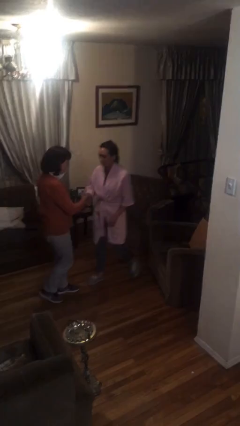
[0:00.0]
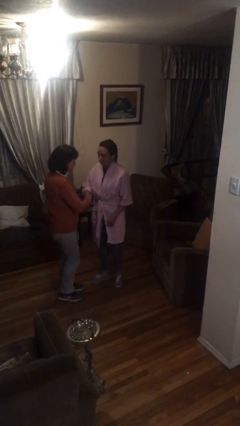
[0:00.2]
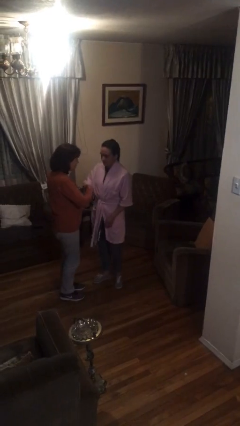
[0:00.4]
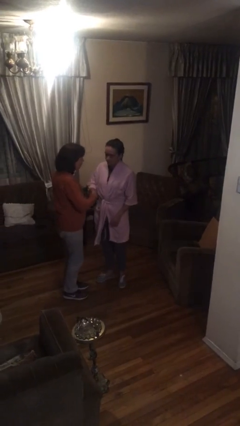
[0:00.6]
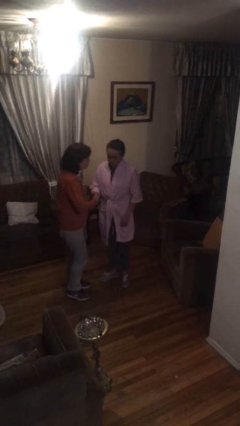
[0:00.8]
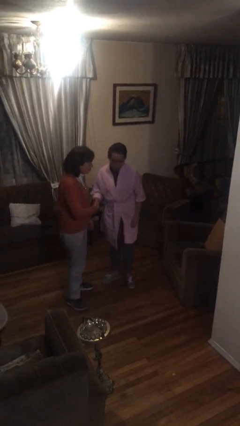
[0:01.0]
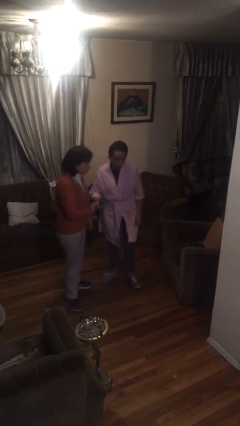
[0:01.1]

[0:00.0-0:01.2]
person shakes hand

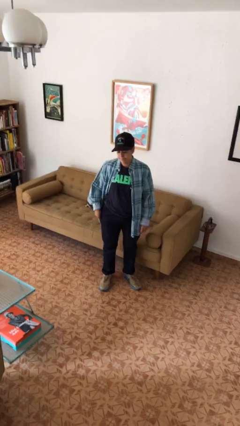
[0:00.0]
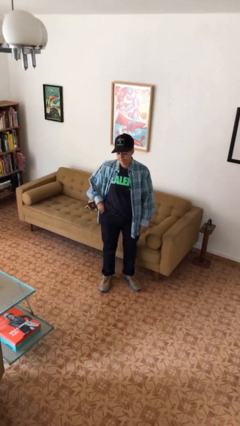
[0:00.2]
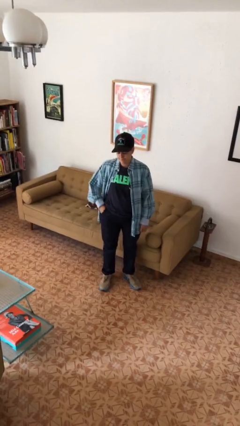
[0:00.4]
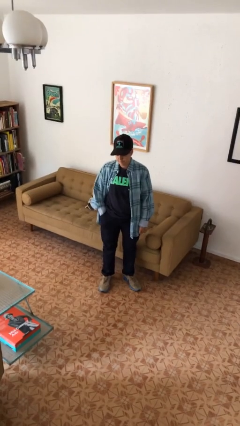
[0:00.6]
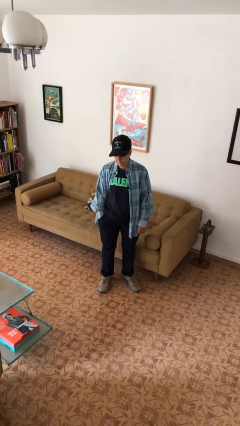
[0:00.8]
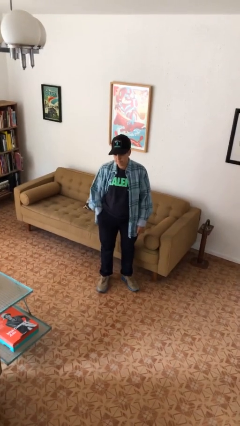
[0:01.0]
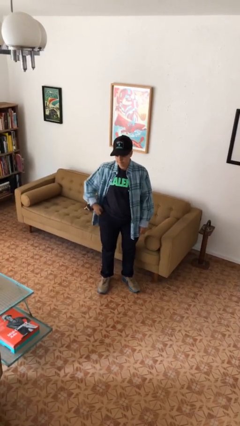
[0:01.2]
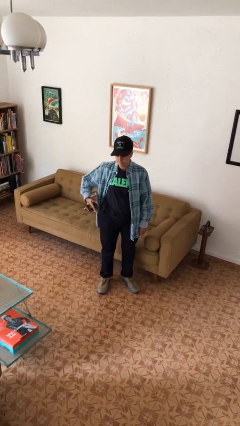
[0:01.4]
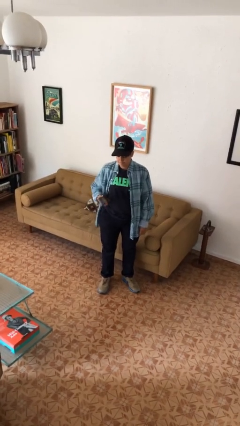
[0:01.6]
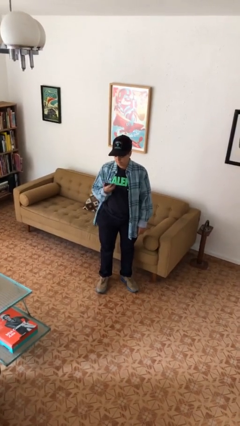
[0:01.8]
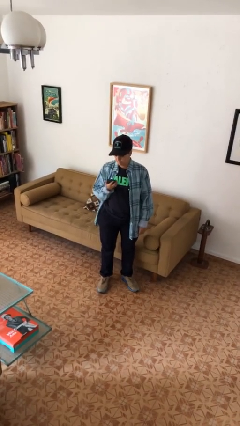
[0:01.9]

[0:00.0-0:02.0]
person takes phone from pocket

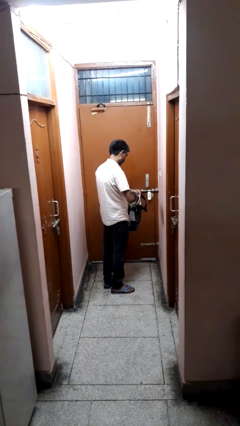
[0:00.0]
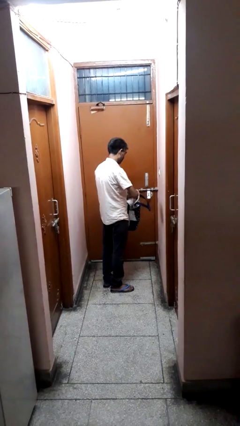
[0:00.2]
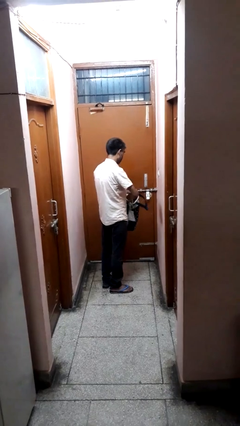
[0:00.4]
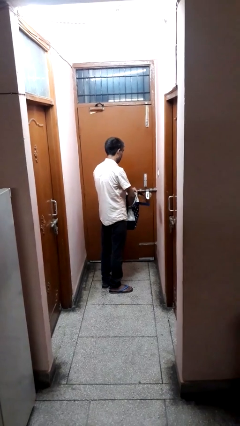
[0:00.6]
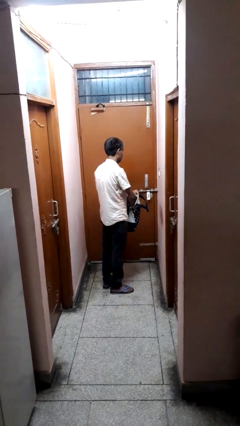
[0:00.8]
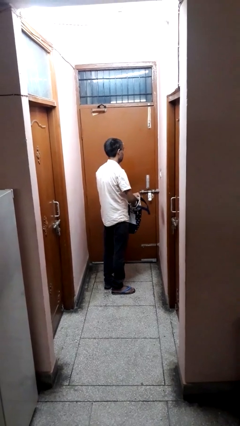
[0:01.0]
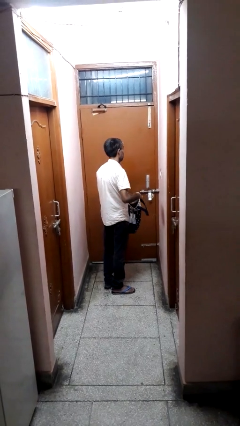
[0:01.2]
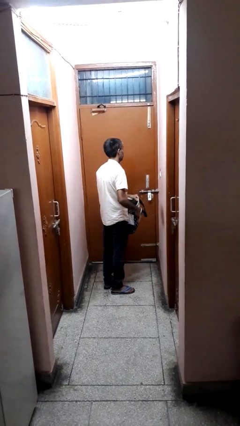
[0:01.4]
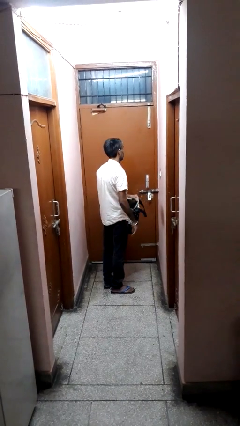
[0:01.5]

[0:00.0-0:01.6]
person puts object into bag

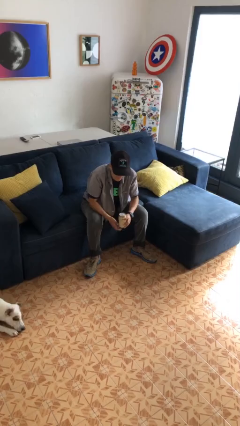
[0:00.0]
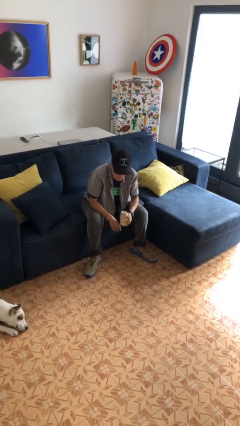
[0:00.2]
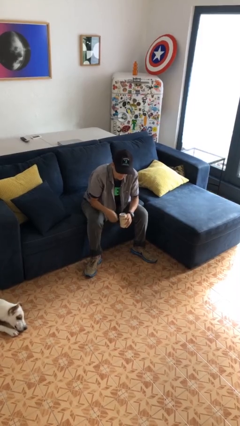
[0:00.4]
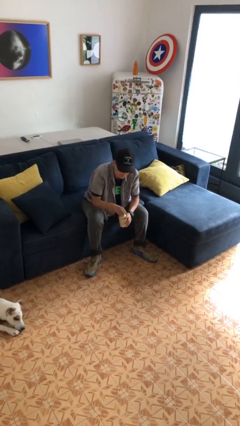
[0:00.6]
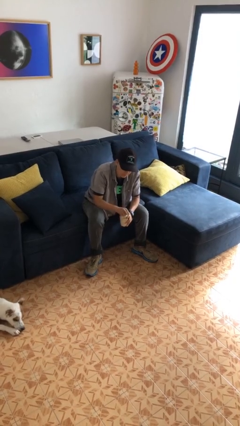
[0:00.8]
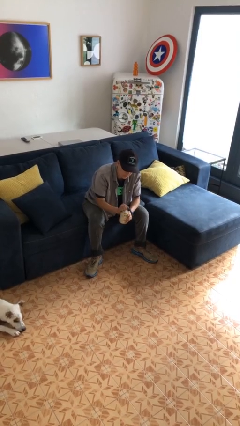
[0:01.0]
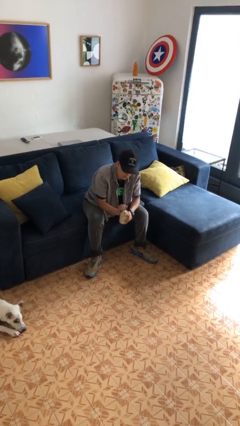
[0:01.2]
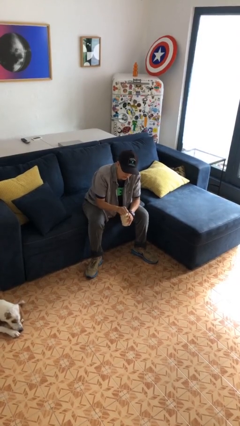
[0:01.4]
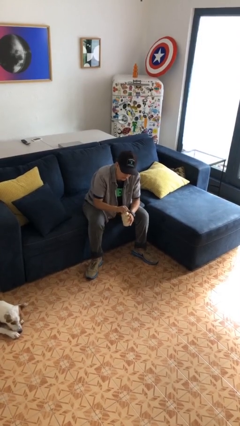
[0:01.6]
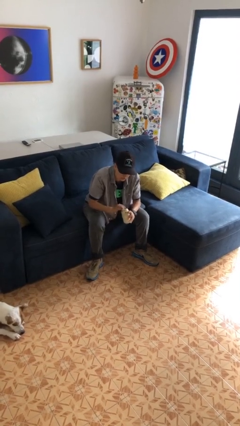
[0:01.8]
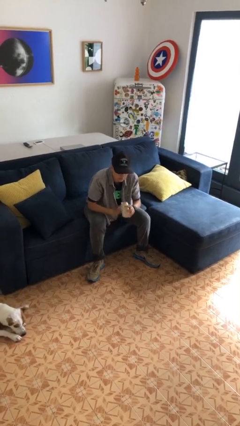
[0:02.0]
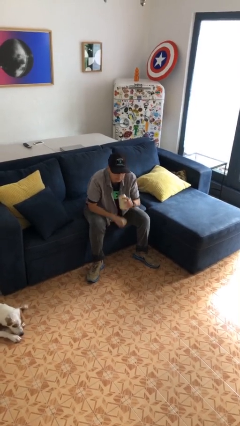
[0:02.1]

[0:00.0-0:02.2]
person opens beverage can

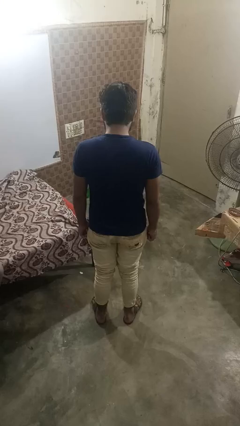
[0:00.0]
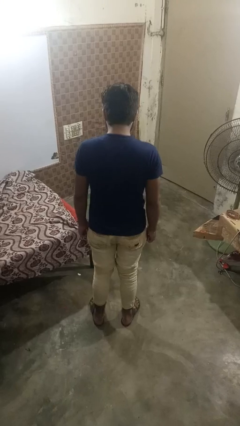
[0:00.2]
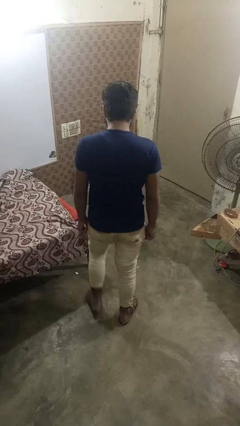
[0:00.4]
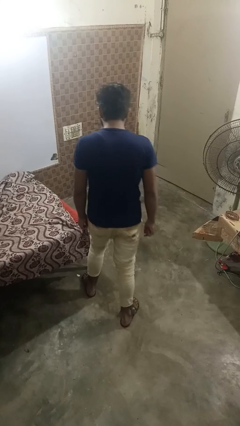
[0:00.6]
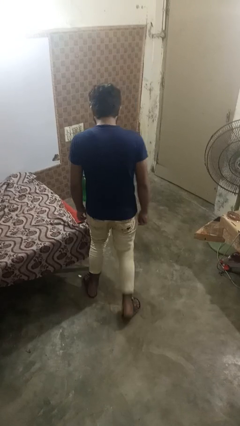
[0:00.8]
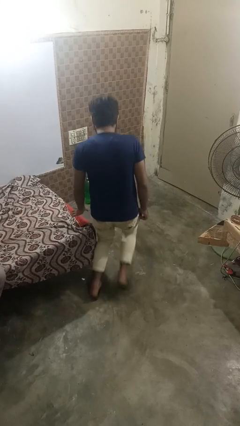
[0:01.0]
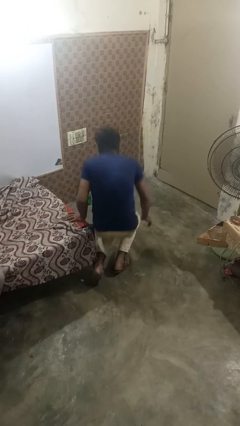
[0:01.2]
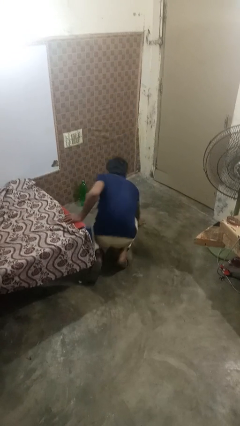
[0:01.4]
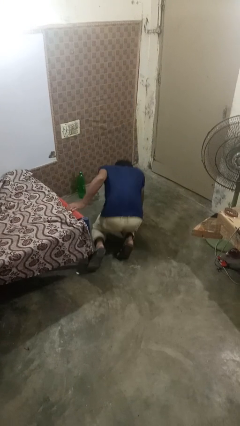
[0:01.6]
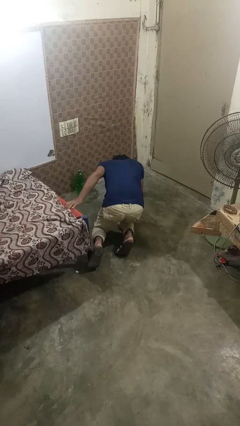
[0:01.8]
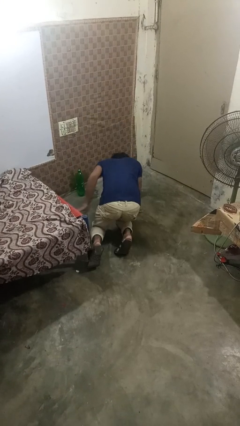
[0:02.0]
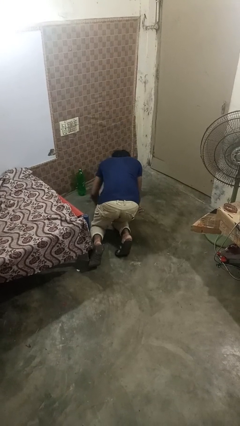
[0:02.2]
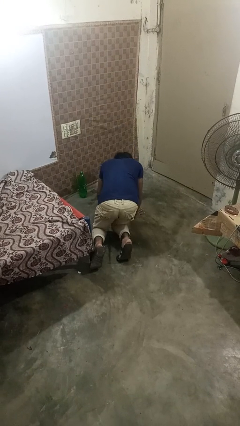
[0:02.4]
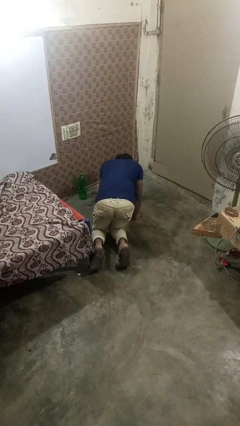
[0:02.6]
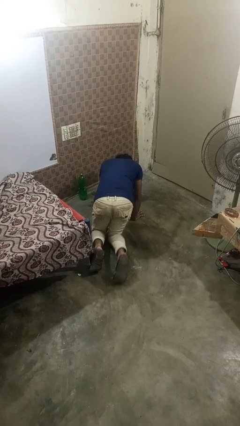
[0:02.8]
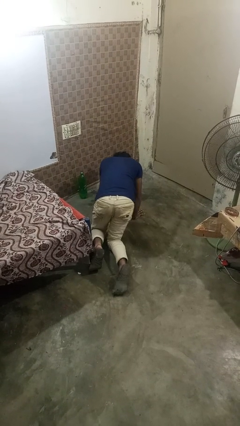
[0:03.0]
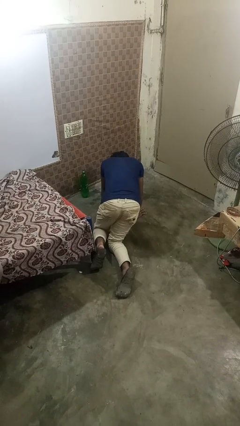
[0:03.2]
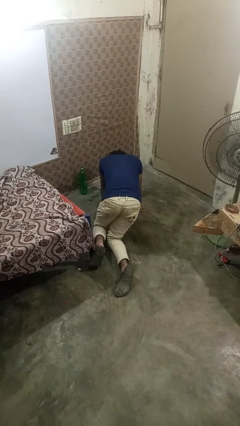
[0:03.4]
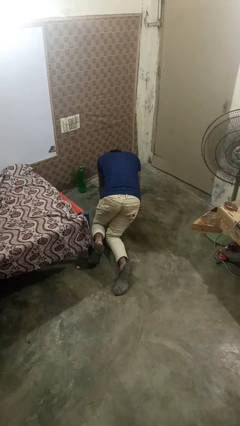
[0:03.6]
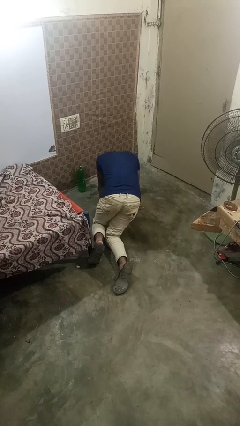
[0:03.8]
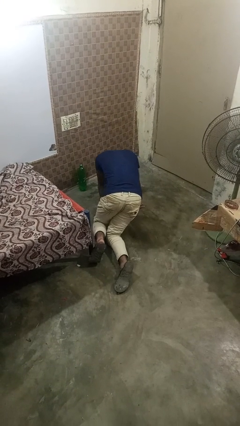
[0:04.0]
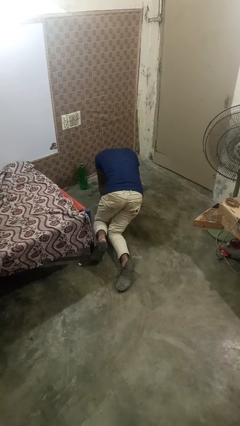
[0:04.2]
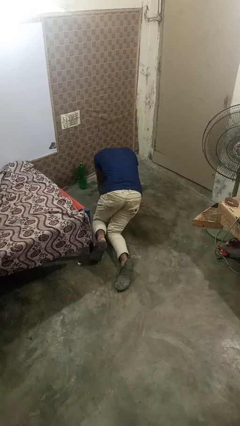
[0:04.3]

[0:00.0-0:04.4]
person trips on object on floor

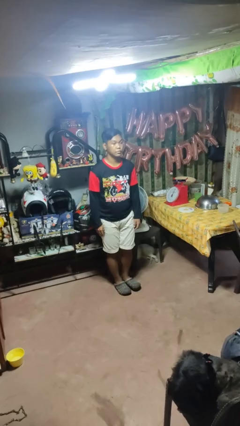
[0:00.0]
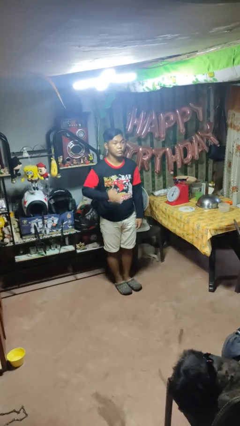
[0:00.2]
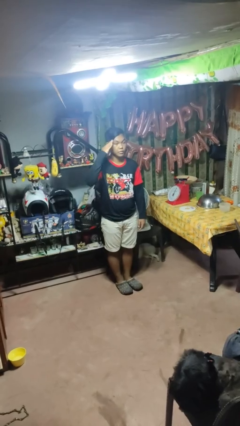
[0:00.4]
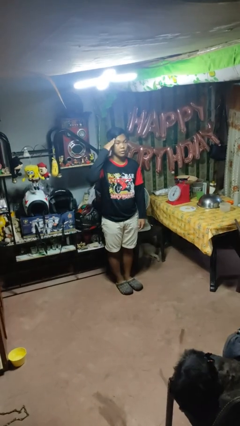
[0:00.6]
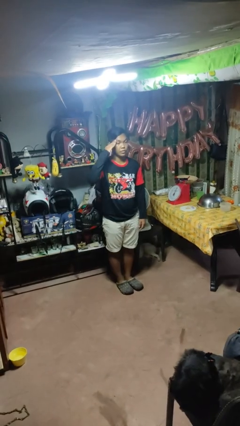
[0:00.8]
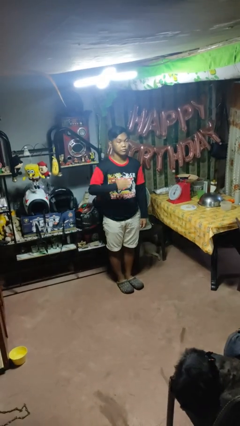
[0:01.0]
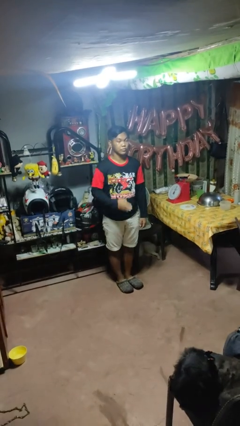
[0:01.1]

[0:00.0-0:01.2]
person salutes

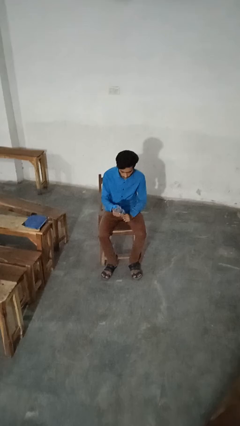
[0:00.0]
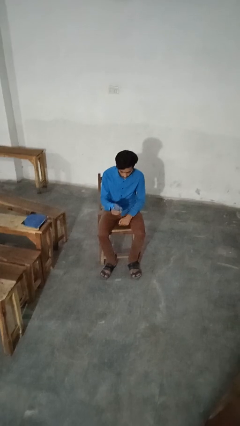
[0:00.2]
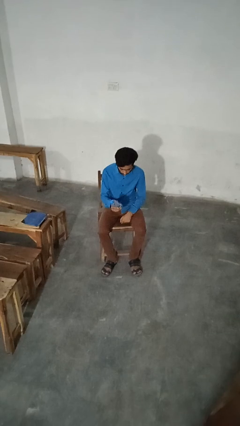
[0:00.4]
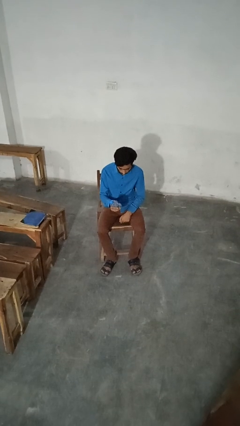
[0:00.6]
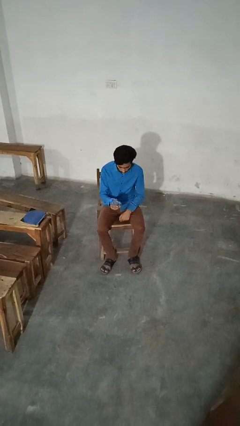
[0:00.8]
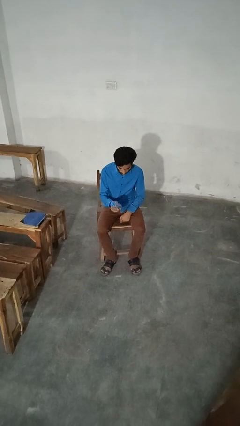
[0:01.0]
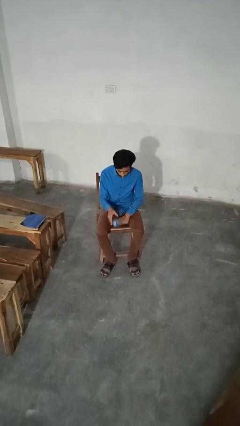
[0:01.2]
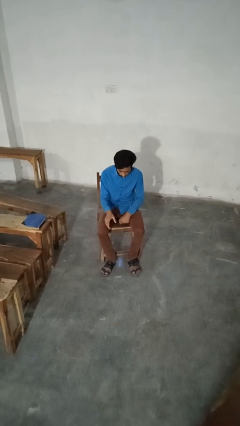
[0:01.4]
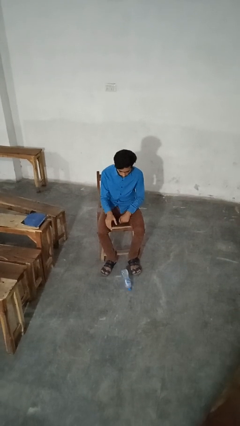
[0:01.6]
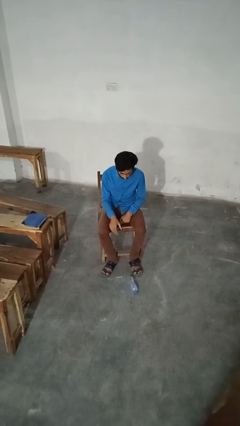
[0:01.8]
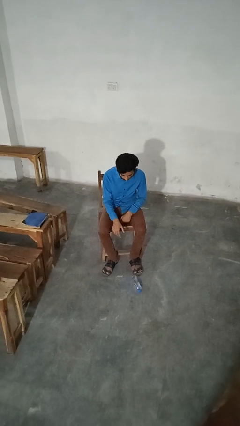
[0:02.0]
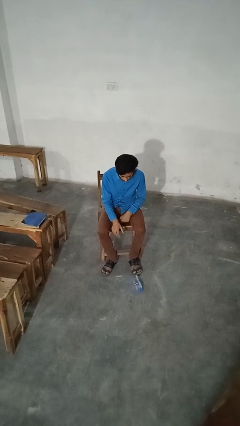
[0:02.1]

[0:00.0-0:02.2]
person drops object

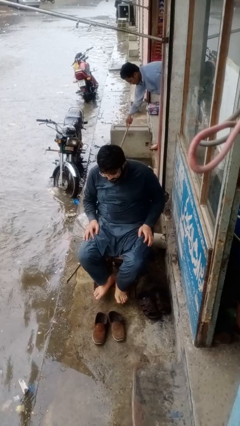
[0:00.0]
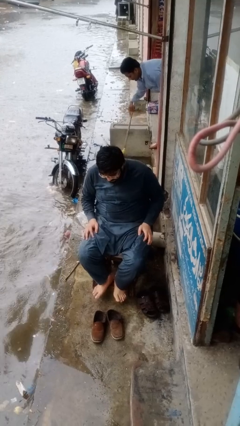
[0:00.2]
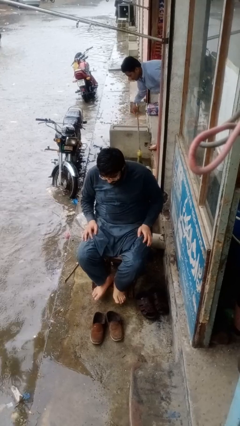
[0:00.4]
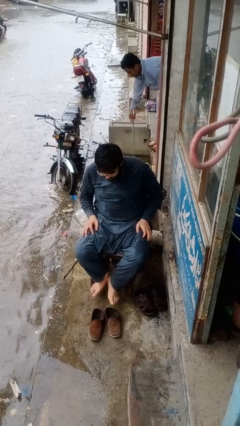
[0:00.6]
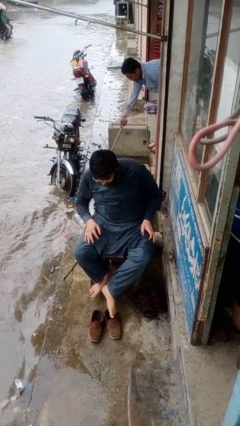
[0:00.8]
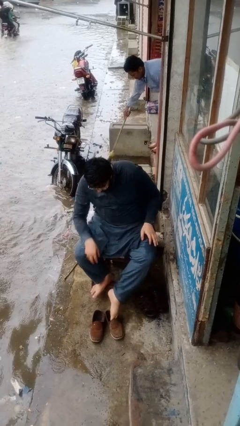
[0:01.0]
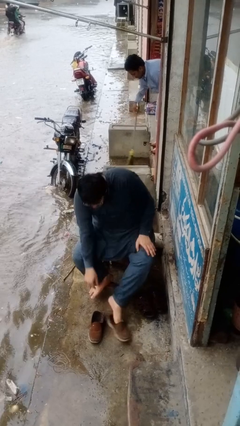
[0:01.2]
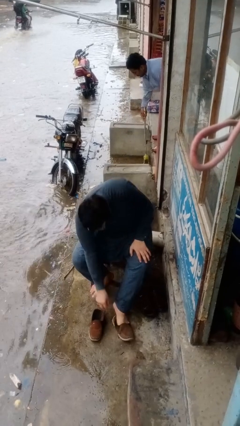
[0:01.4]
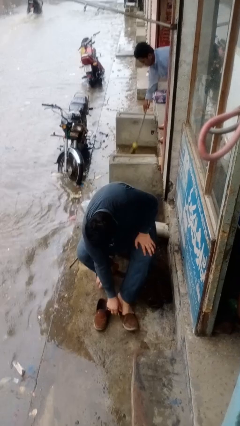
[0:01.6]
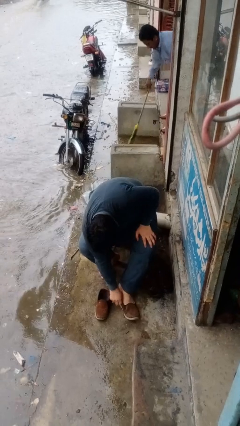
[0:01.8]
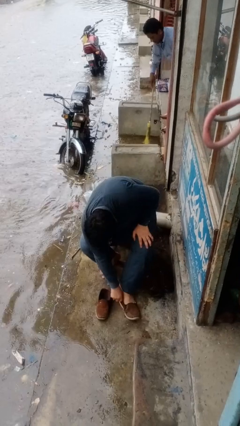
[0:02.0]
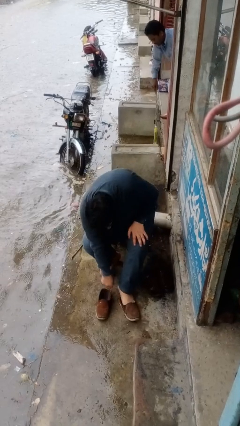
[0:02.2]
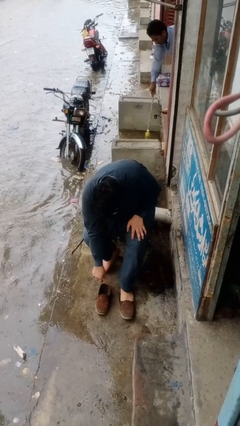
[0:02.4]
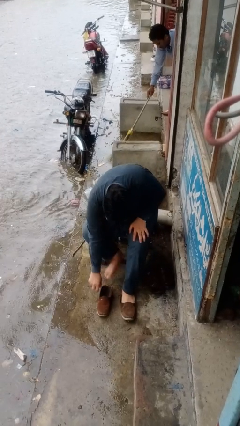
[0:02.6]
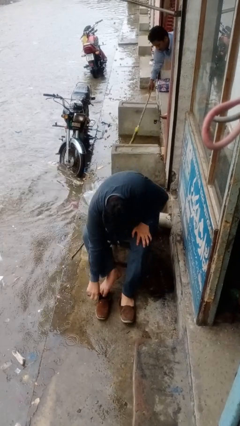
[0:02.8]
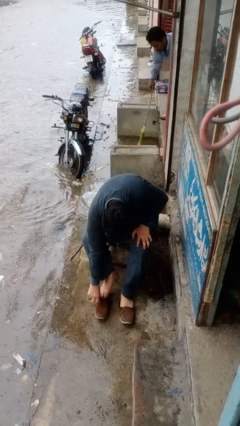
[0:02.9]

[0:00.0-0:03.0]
person puts on shoes
